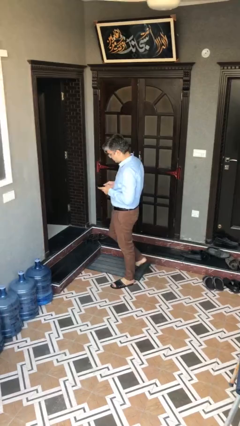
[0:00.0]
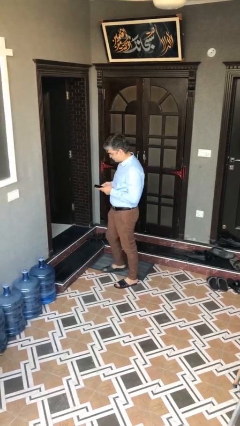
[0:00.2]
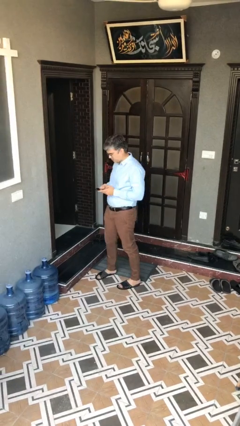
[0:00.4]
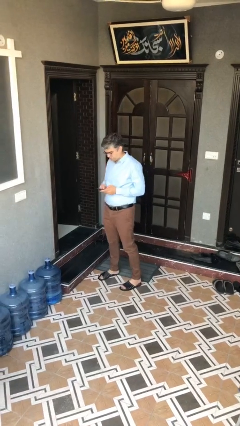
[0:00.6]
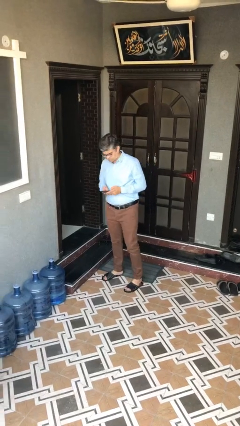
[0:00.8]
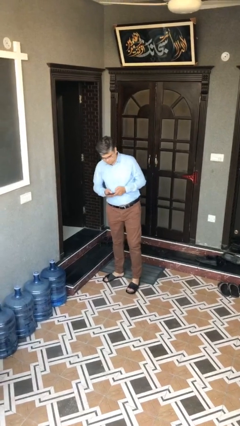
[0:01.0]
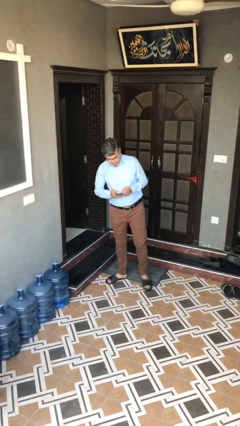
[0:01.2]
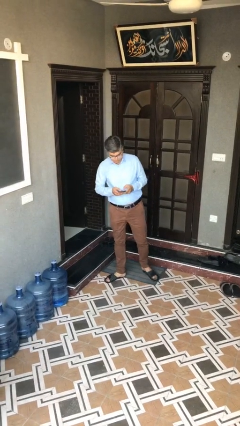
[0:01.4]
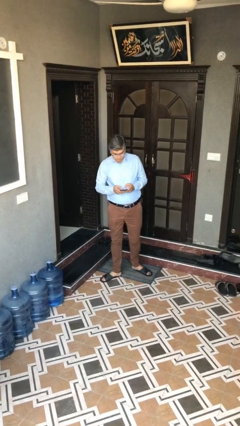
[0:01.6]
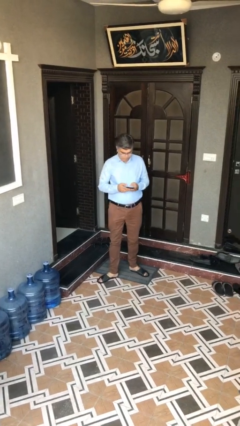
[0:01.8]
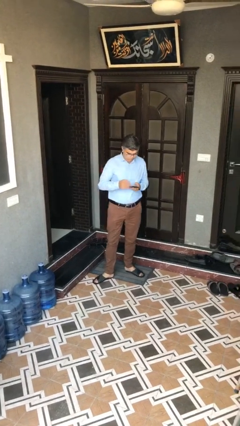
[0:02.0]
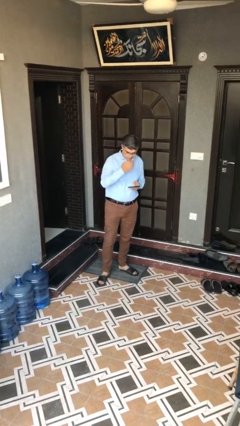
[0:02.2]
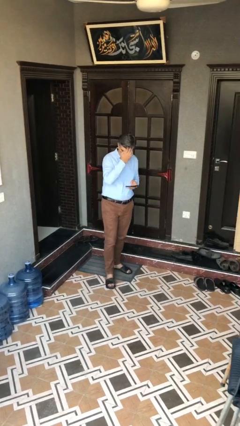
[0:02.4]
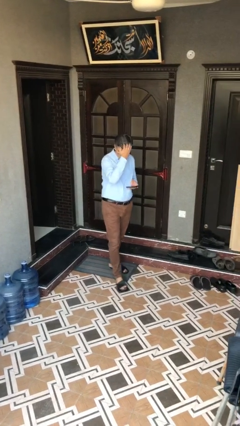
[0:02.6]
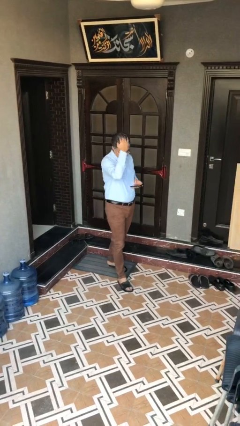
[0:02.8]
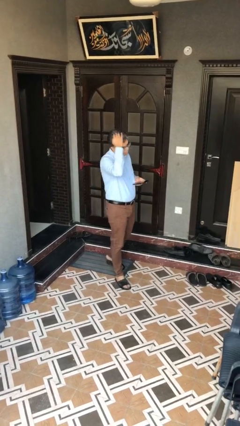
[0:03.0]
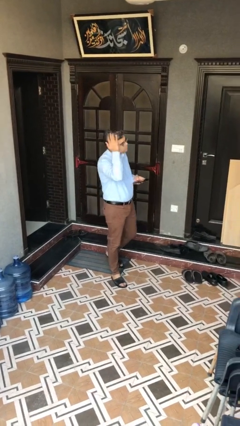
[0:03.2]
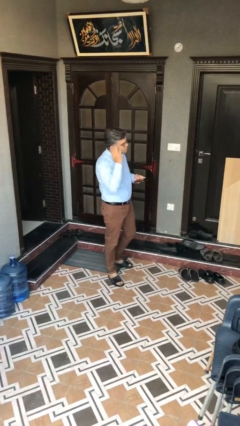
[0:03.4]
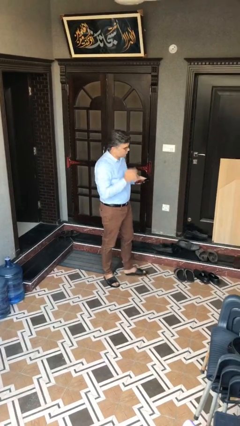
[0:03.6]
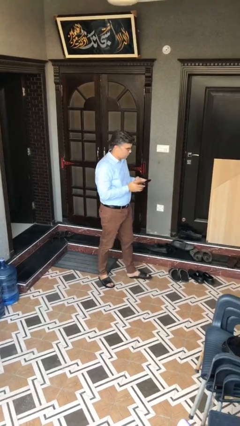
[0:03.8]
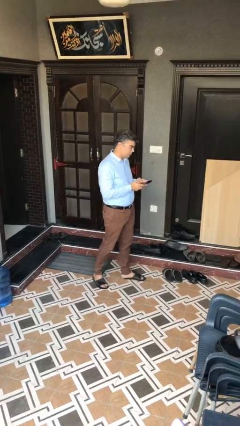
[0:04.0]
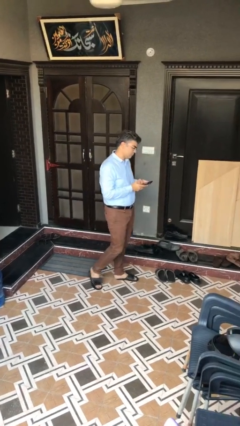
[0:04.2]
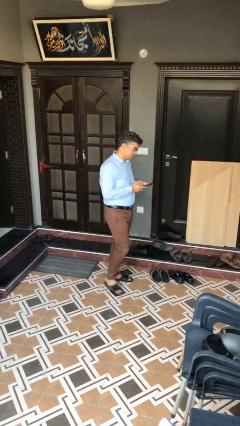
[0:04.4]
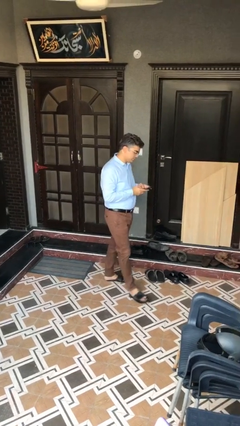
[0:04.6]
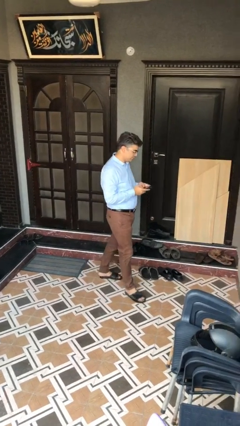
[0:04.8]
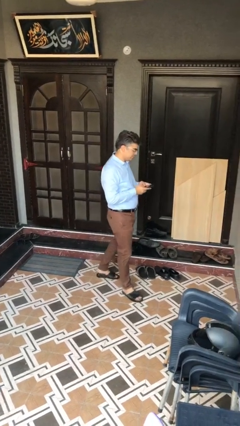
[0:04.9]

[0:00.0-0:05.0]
person texts on phone

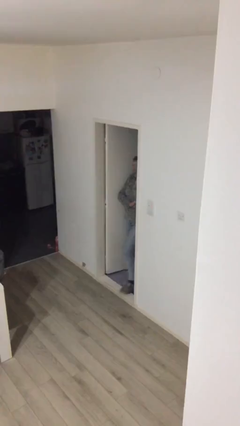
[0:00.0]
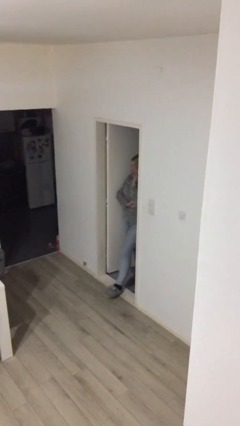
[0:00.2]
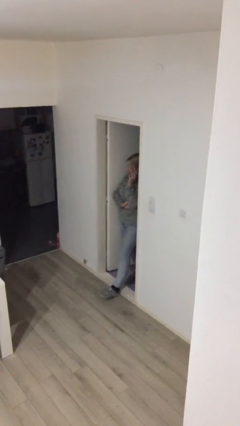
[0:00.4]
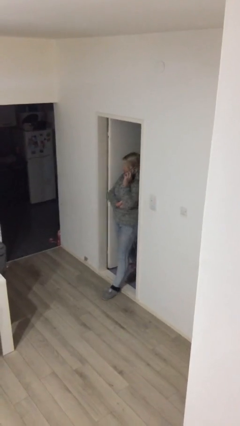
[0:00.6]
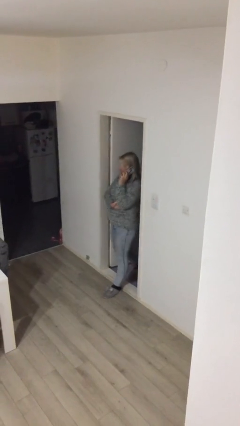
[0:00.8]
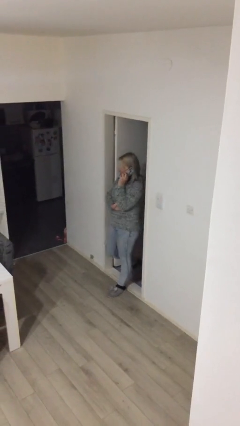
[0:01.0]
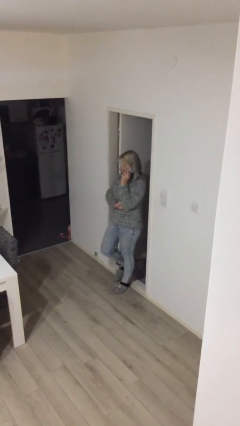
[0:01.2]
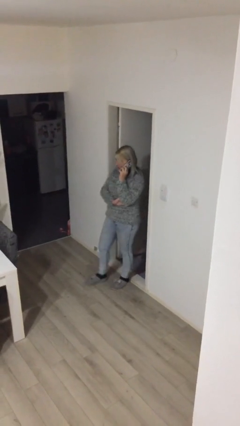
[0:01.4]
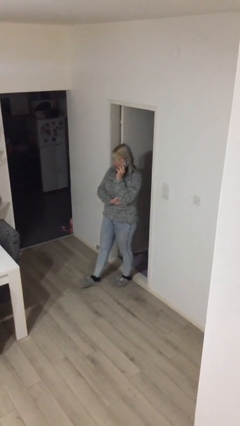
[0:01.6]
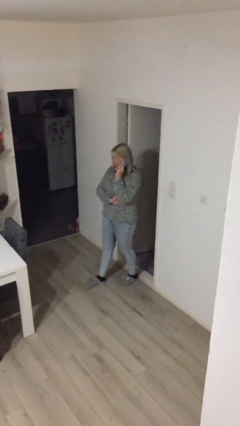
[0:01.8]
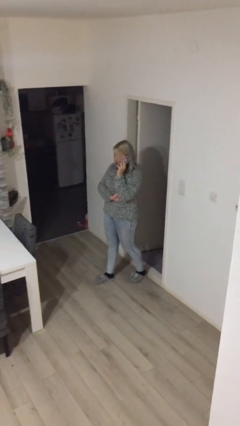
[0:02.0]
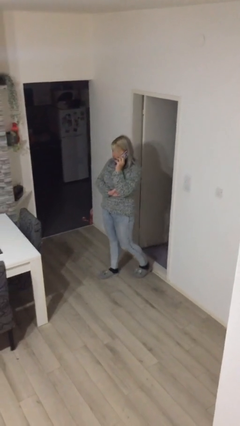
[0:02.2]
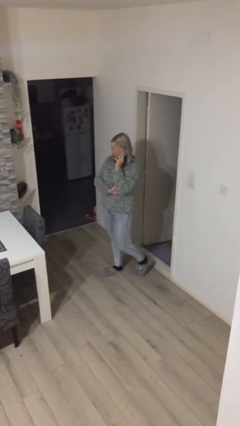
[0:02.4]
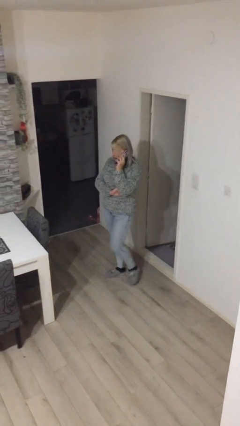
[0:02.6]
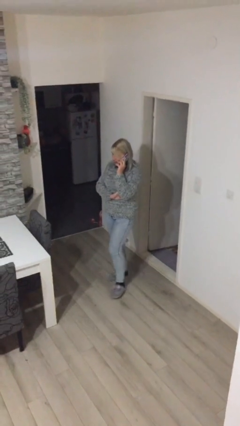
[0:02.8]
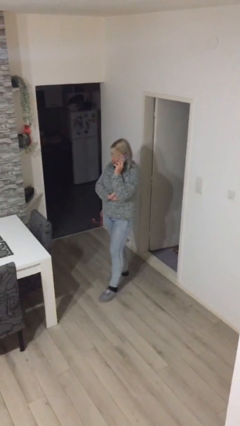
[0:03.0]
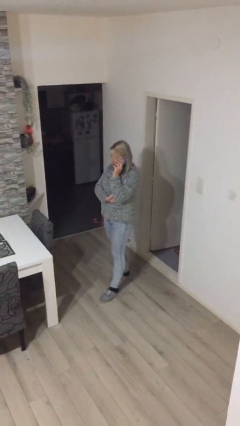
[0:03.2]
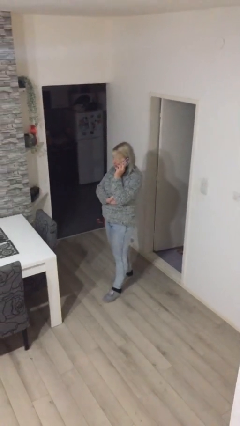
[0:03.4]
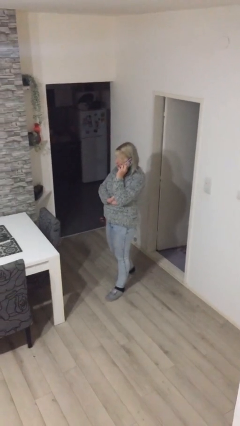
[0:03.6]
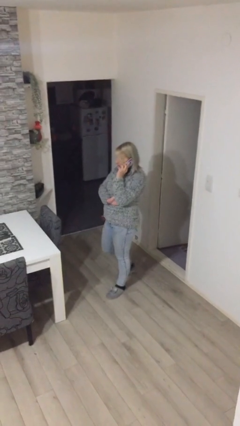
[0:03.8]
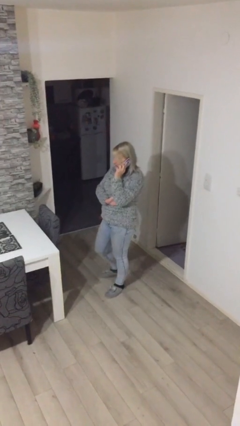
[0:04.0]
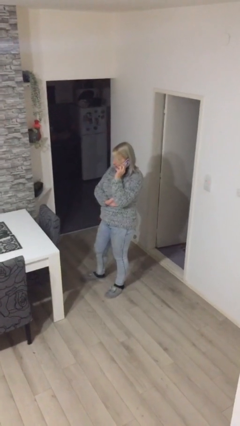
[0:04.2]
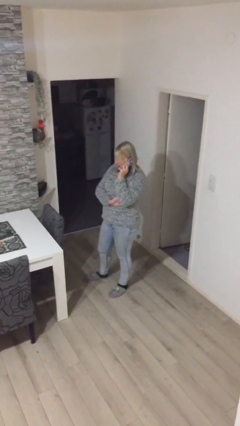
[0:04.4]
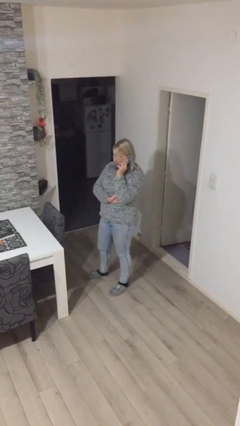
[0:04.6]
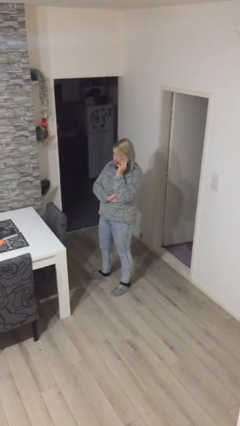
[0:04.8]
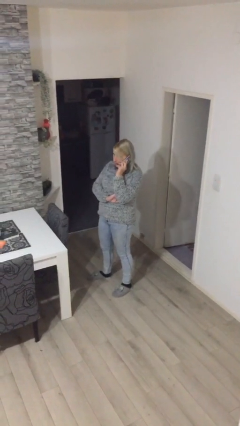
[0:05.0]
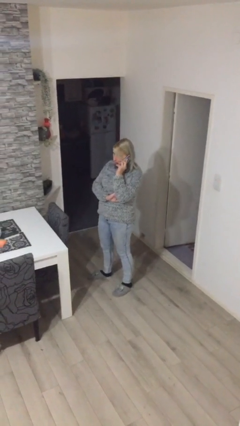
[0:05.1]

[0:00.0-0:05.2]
person enters scene through structure

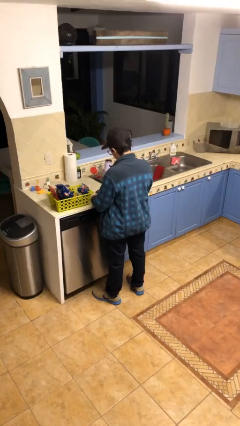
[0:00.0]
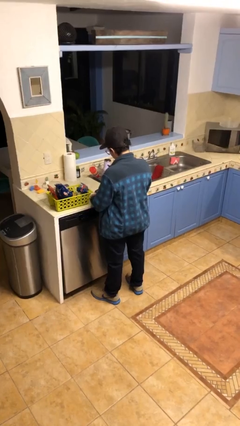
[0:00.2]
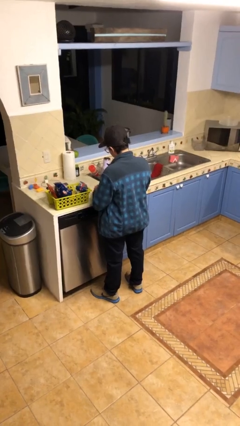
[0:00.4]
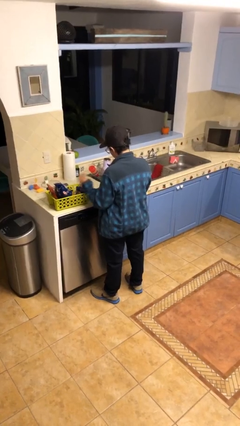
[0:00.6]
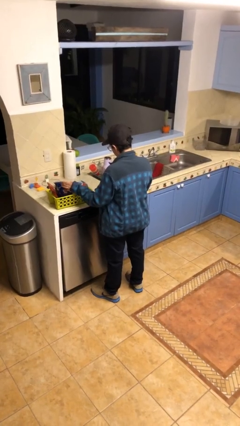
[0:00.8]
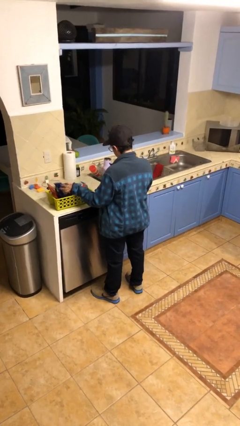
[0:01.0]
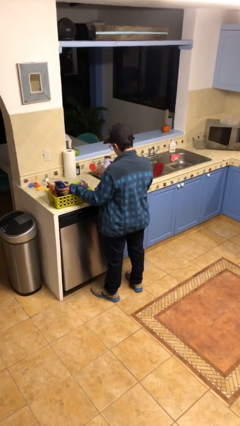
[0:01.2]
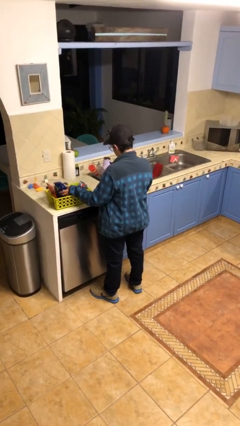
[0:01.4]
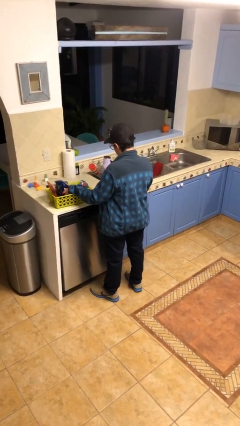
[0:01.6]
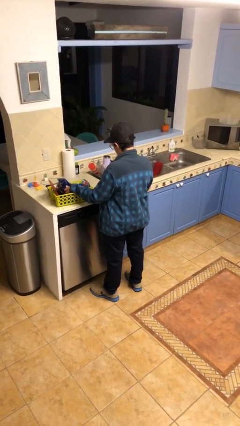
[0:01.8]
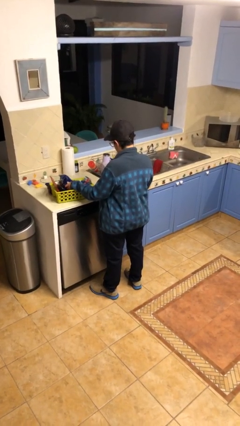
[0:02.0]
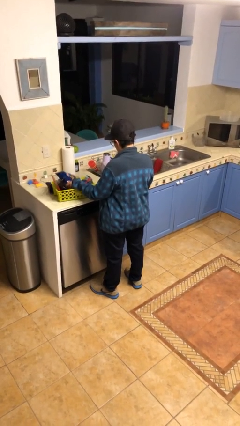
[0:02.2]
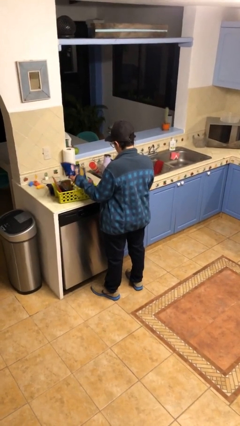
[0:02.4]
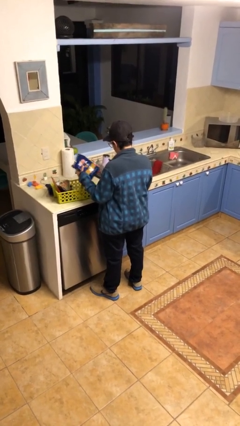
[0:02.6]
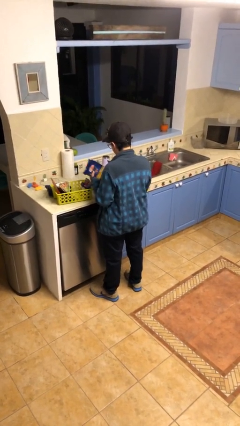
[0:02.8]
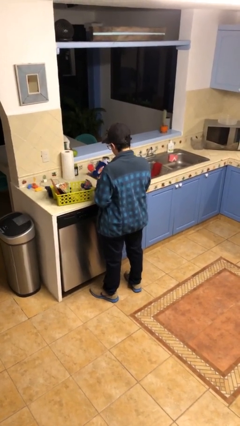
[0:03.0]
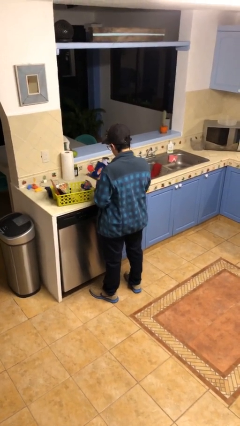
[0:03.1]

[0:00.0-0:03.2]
person takes object from basket

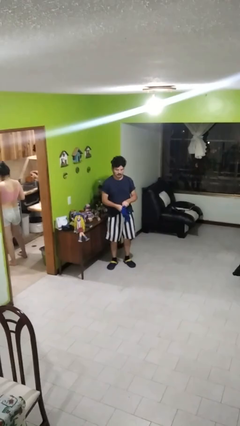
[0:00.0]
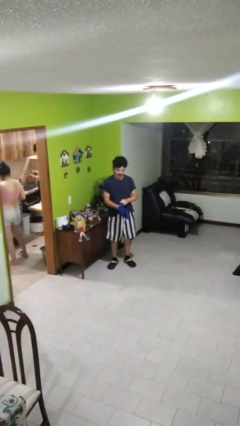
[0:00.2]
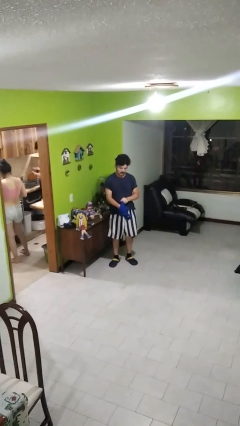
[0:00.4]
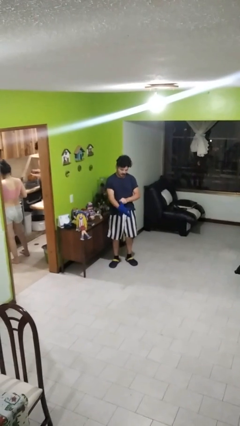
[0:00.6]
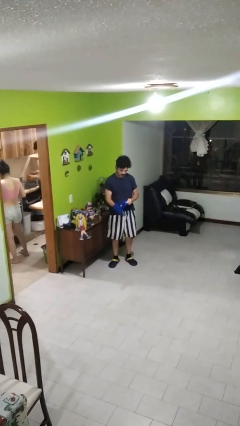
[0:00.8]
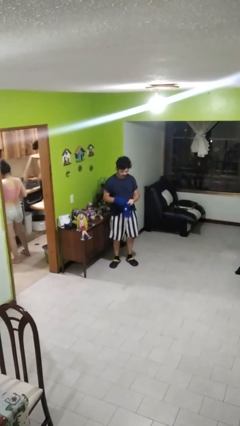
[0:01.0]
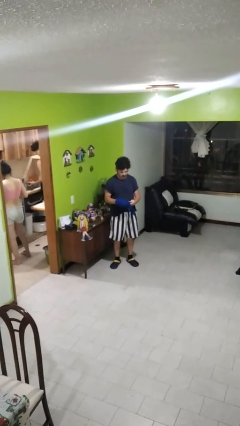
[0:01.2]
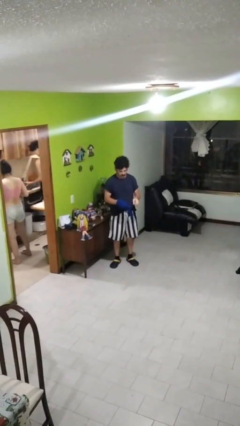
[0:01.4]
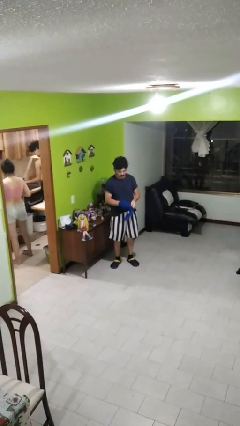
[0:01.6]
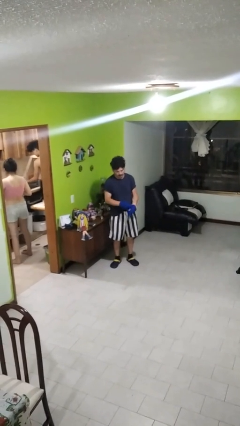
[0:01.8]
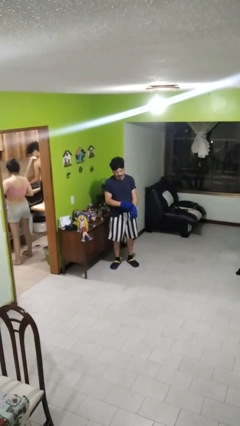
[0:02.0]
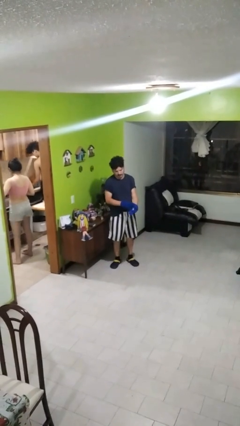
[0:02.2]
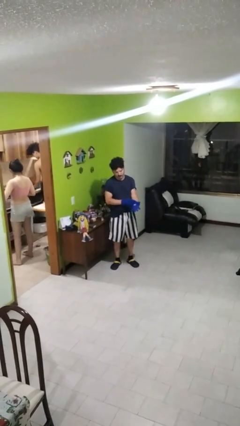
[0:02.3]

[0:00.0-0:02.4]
person puts on gloves

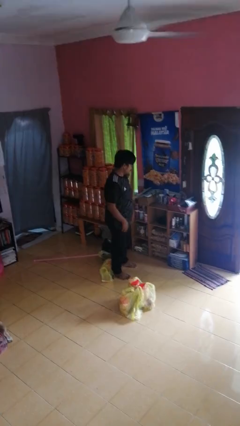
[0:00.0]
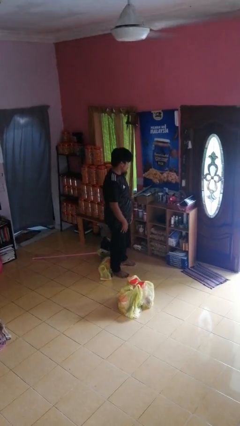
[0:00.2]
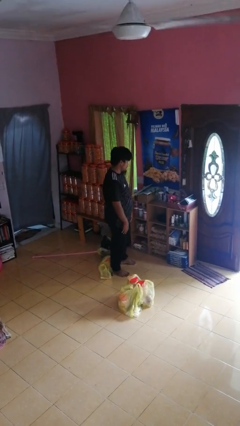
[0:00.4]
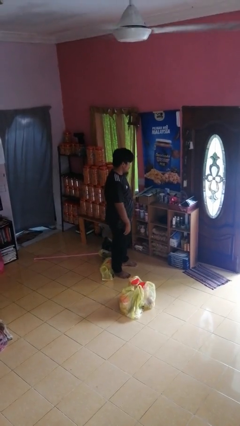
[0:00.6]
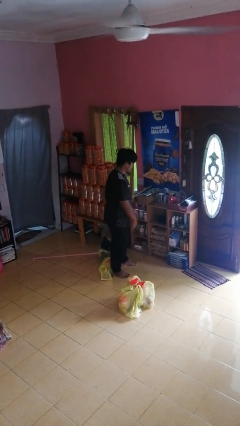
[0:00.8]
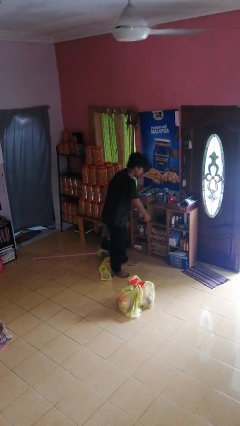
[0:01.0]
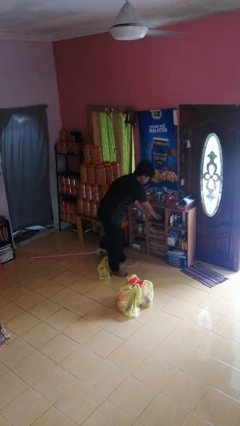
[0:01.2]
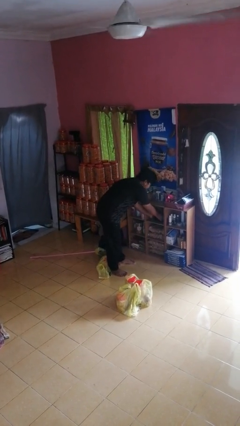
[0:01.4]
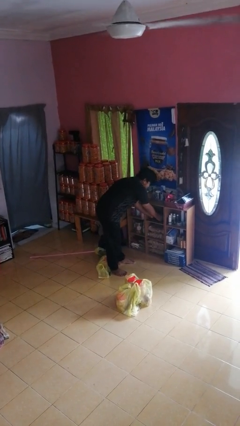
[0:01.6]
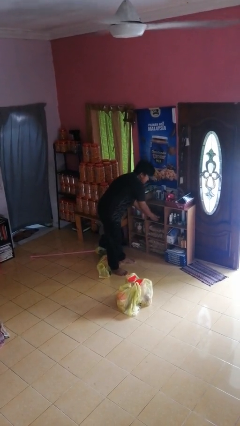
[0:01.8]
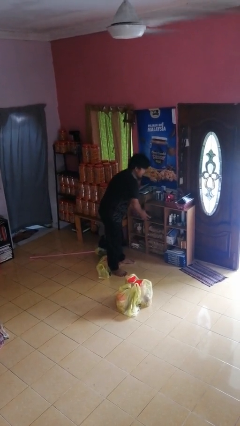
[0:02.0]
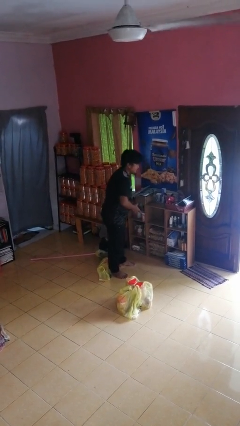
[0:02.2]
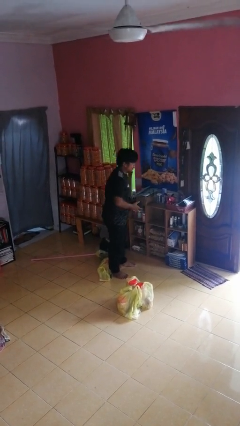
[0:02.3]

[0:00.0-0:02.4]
person takes object from cabinet
